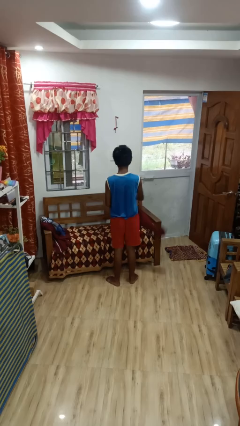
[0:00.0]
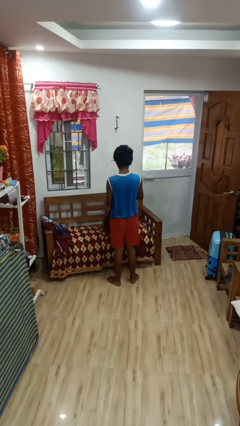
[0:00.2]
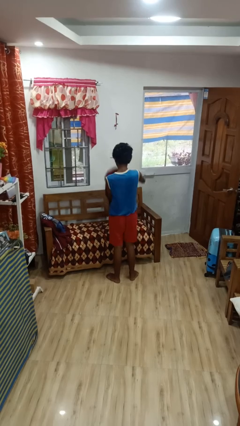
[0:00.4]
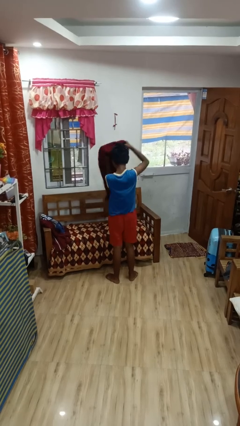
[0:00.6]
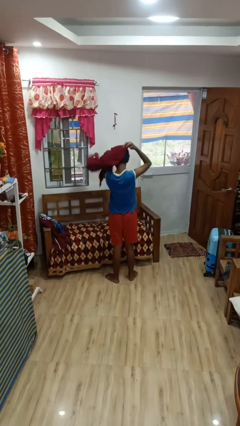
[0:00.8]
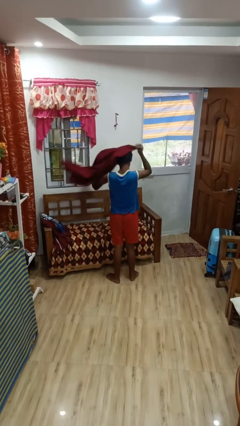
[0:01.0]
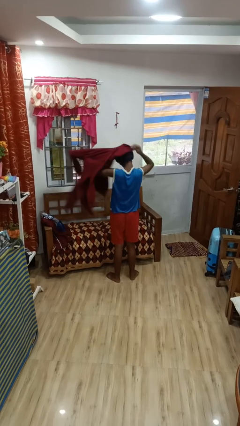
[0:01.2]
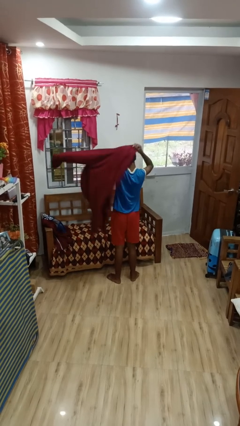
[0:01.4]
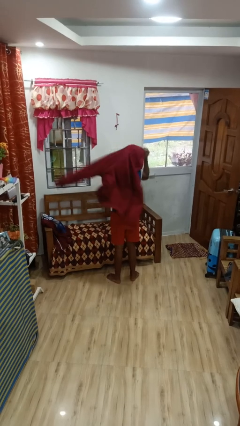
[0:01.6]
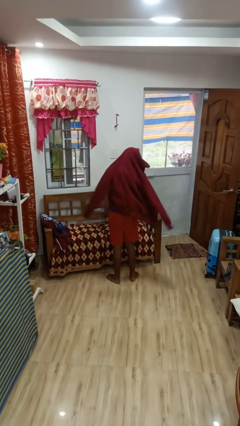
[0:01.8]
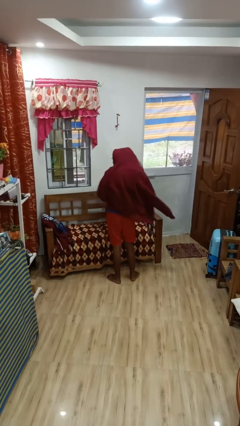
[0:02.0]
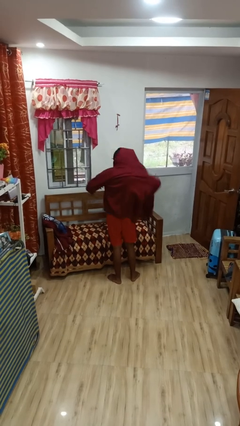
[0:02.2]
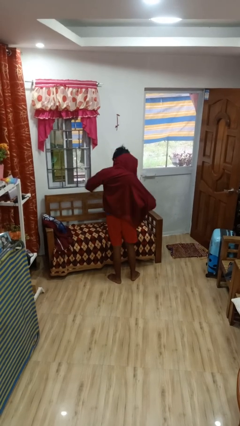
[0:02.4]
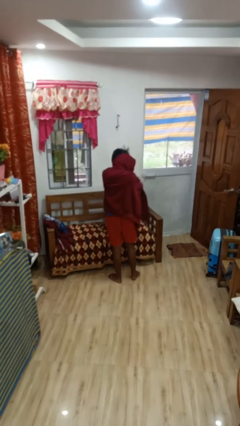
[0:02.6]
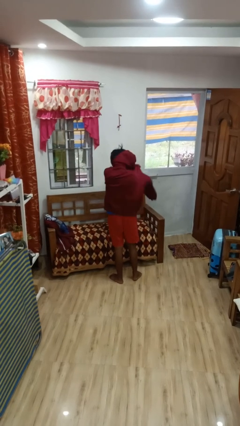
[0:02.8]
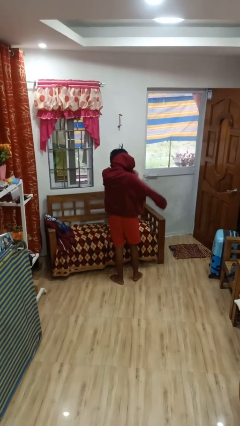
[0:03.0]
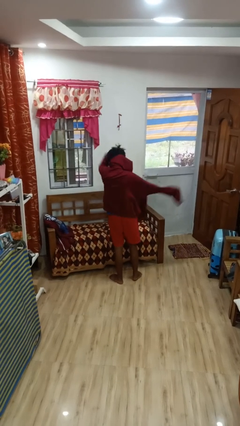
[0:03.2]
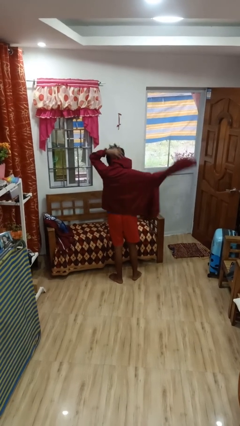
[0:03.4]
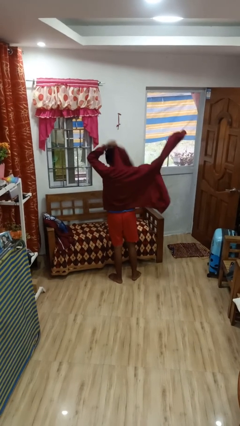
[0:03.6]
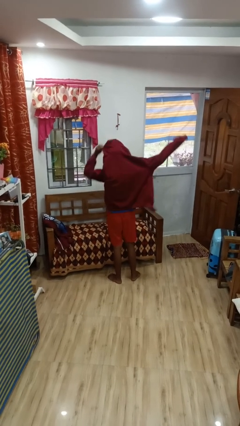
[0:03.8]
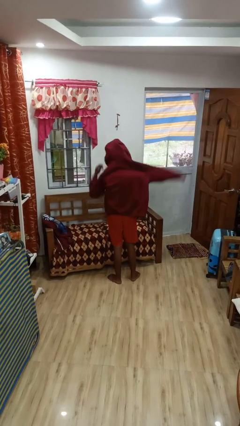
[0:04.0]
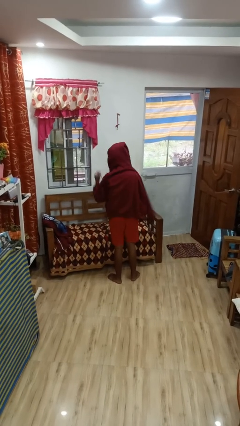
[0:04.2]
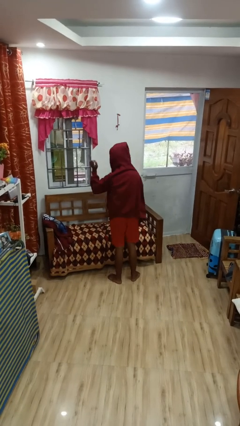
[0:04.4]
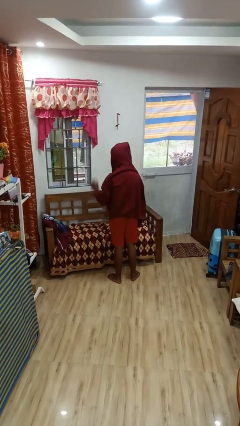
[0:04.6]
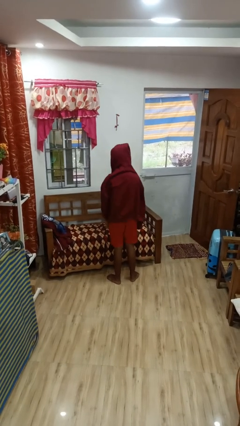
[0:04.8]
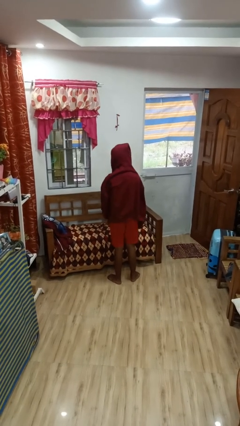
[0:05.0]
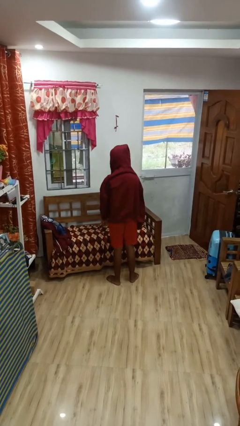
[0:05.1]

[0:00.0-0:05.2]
person puts on hoodie

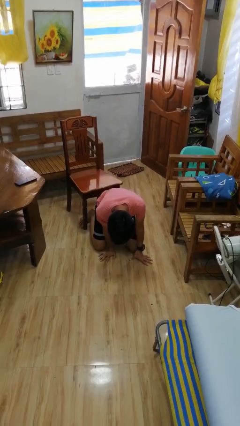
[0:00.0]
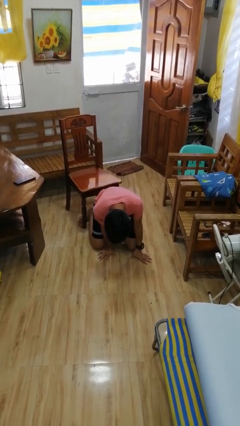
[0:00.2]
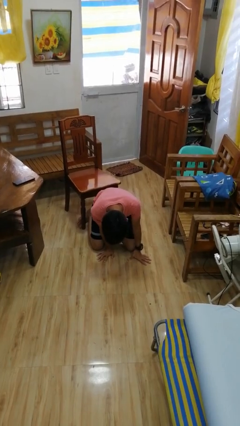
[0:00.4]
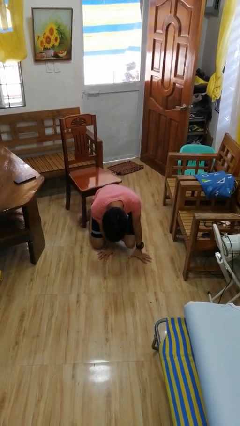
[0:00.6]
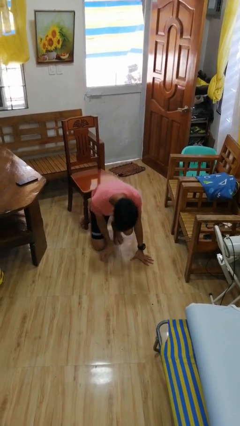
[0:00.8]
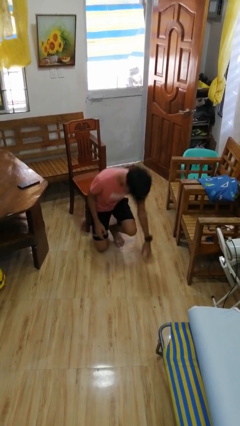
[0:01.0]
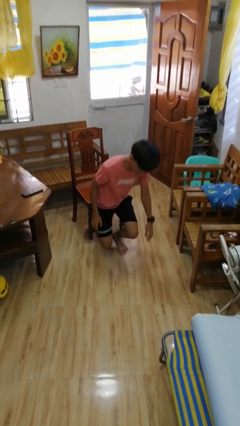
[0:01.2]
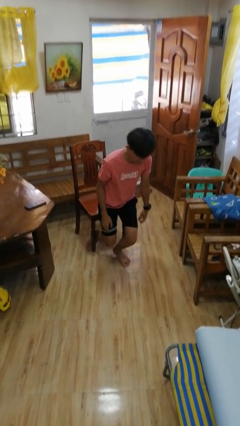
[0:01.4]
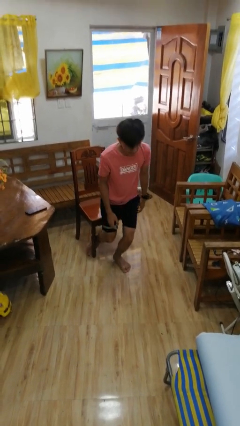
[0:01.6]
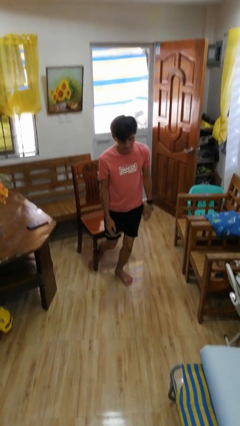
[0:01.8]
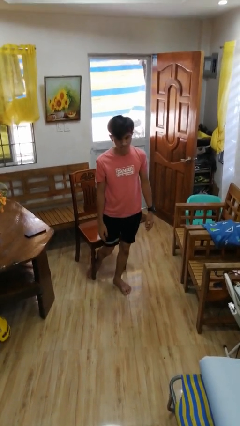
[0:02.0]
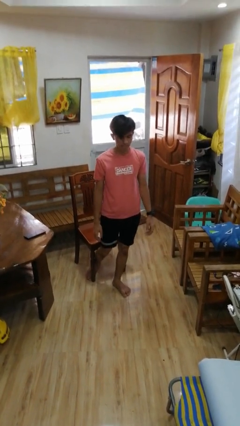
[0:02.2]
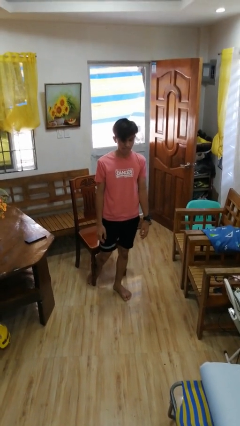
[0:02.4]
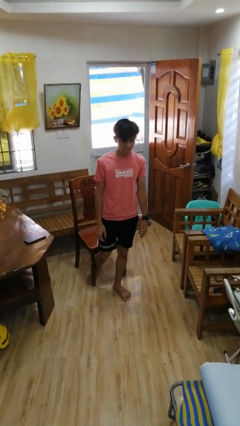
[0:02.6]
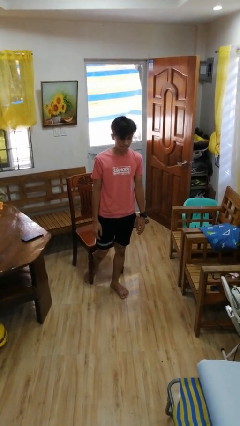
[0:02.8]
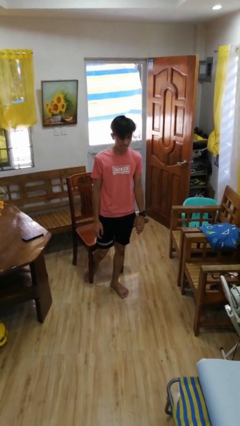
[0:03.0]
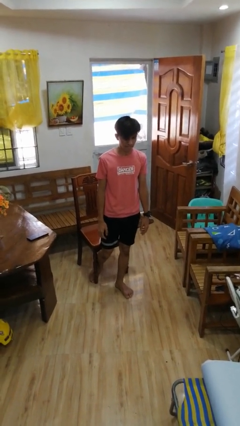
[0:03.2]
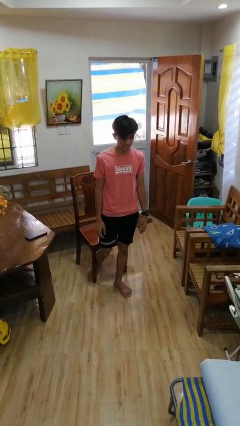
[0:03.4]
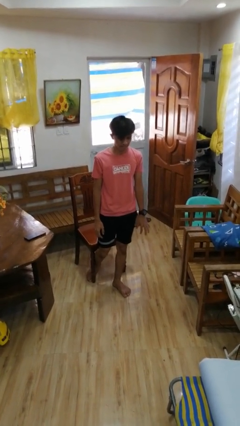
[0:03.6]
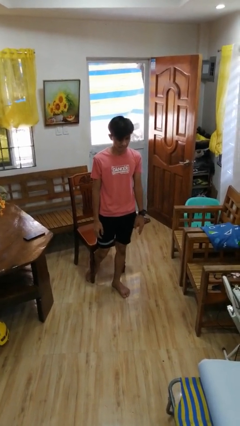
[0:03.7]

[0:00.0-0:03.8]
person stands up from floor

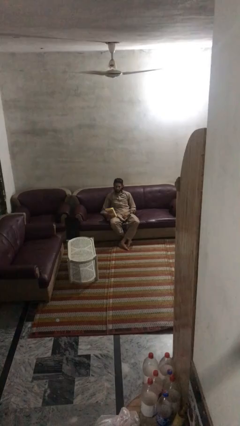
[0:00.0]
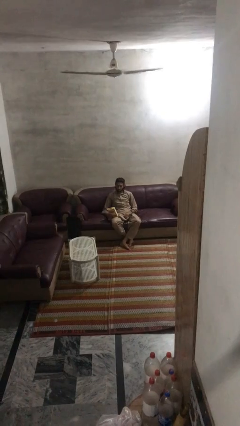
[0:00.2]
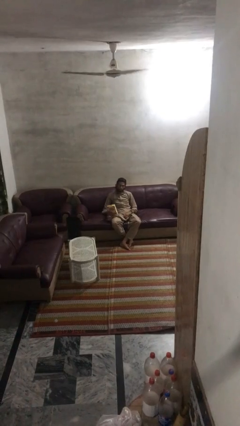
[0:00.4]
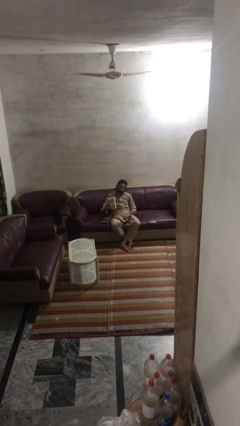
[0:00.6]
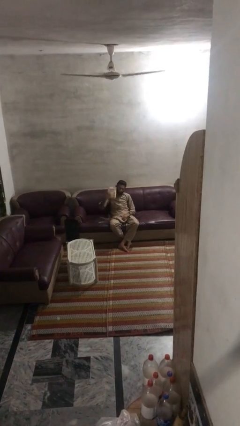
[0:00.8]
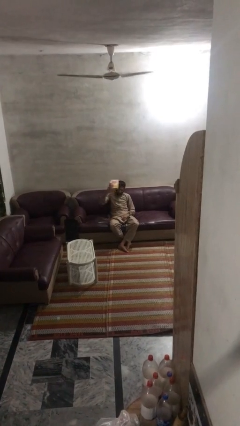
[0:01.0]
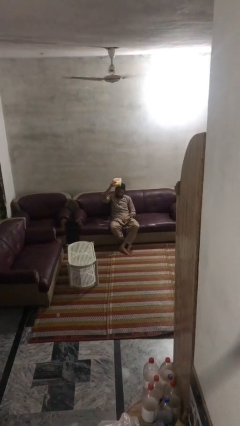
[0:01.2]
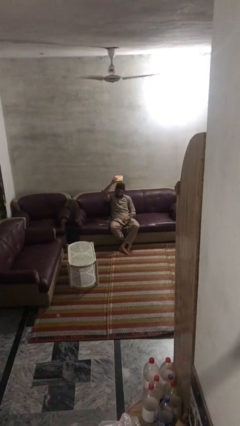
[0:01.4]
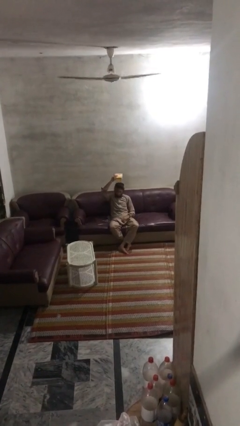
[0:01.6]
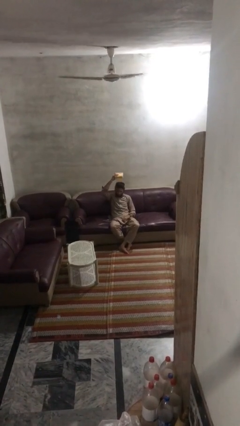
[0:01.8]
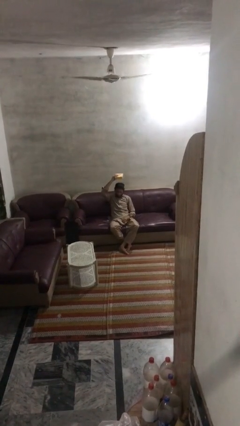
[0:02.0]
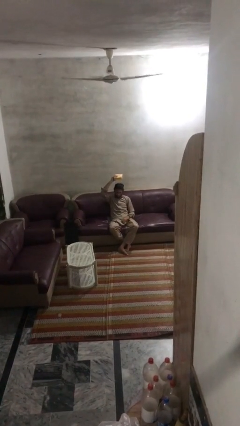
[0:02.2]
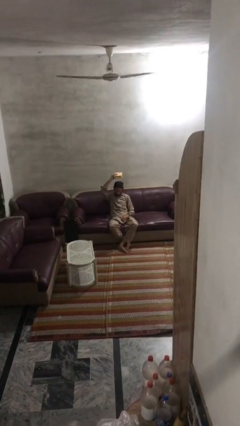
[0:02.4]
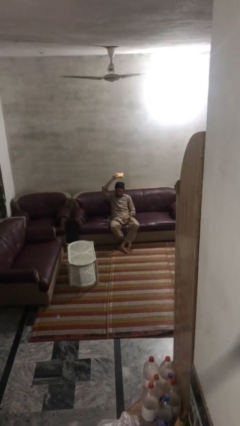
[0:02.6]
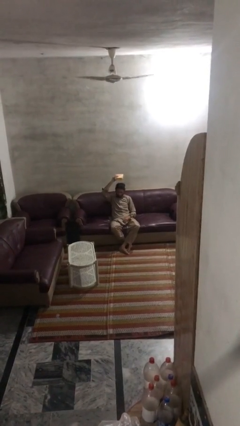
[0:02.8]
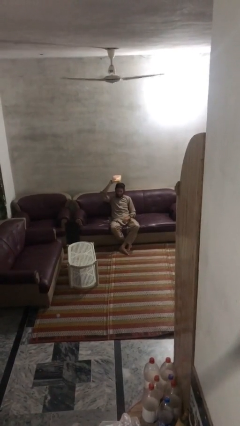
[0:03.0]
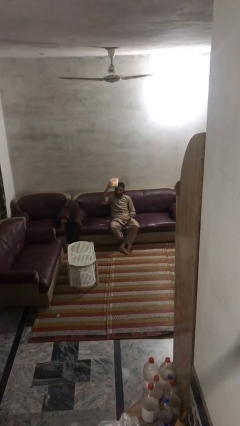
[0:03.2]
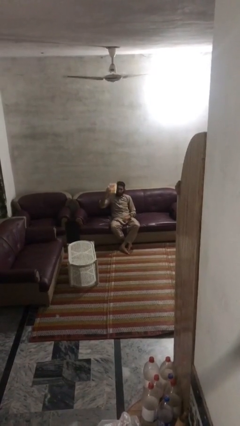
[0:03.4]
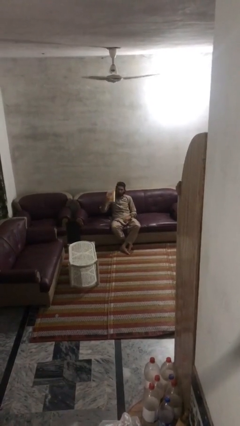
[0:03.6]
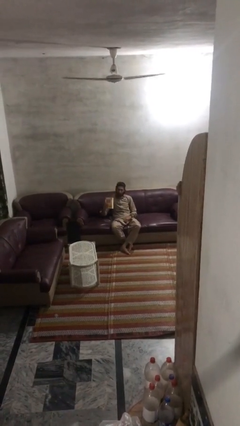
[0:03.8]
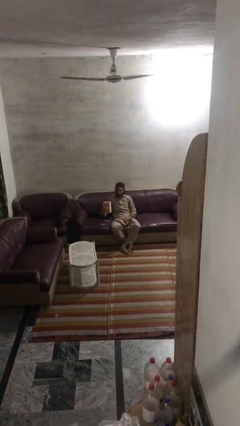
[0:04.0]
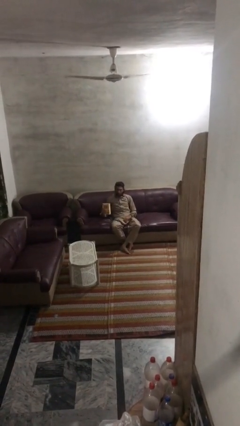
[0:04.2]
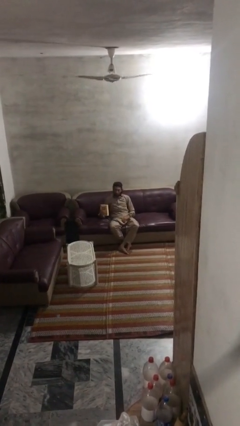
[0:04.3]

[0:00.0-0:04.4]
person holds object above head

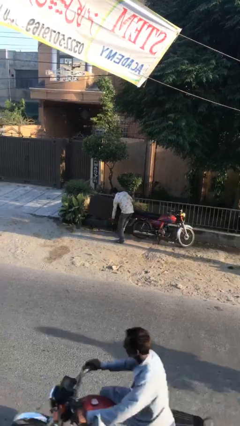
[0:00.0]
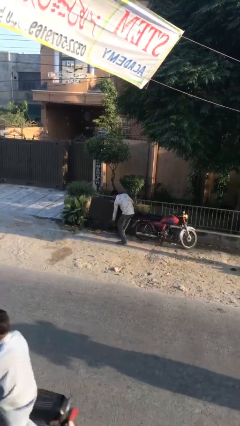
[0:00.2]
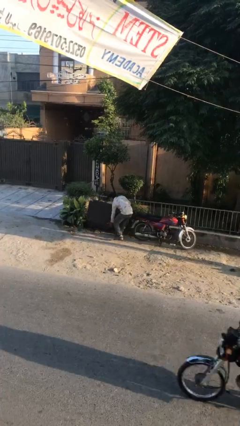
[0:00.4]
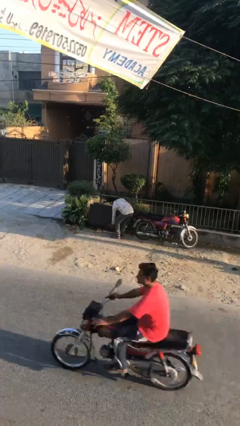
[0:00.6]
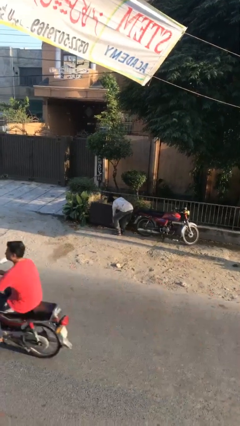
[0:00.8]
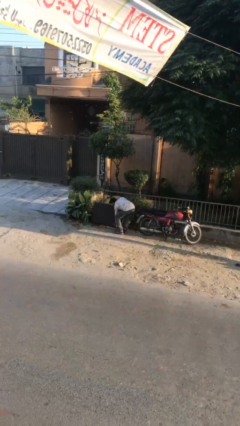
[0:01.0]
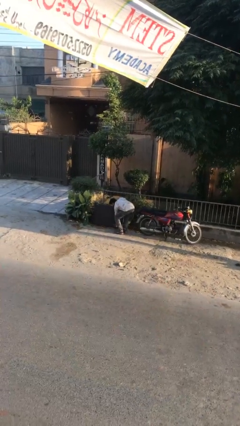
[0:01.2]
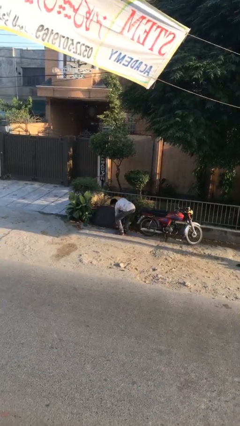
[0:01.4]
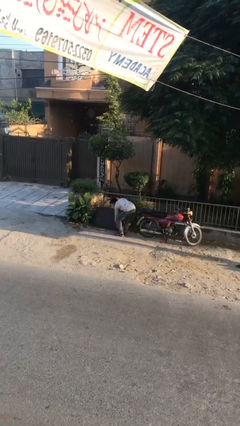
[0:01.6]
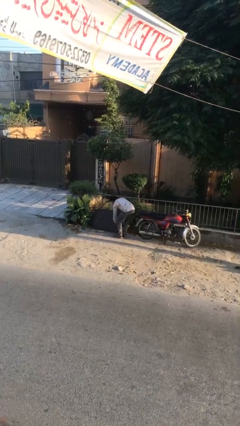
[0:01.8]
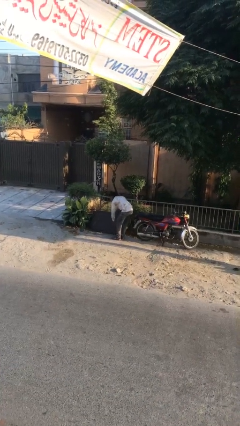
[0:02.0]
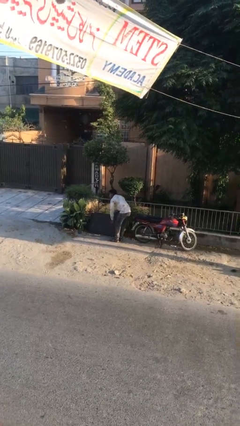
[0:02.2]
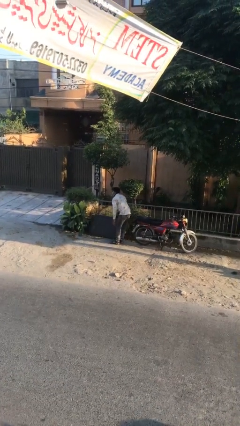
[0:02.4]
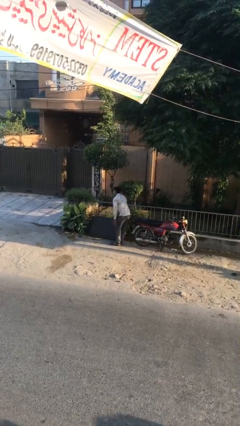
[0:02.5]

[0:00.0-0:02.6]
person puts down object on floor

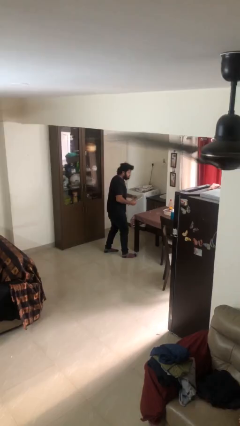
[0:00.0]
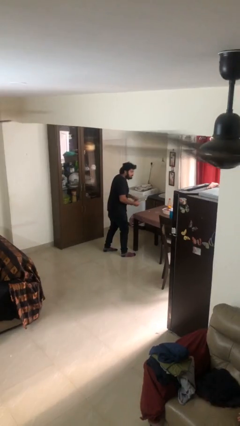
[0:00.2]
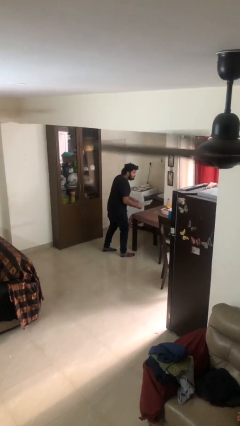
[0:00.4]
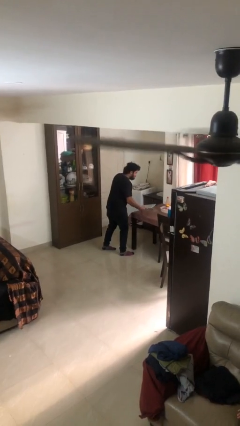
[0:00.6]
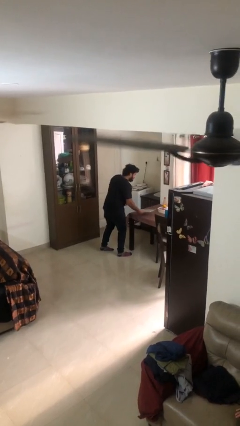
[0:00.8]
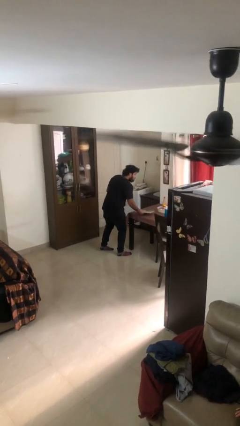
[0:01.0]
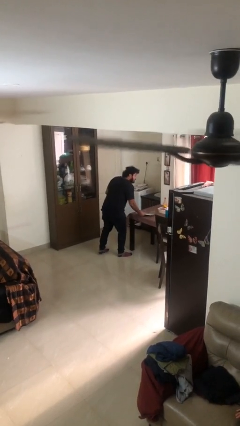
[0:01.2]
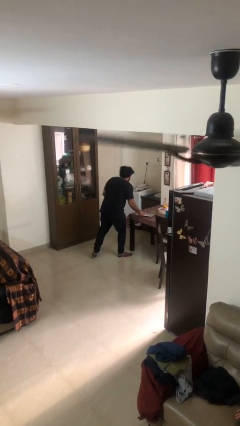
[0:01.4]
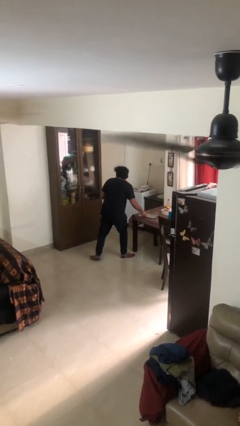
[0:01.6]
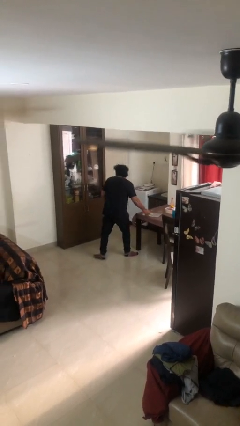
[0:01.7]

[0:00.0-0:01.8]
person puts down object on table
